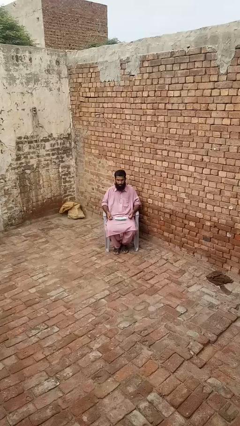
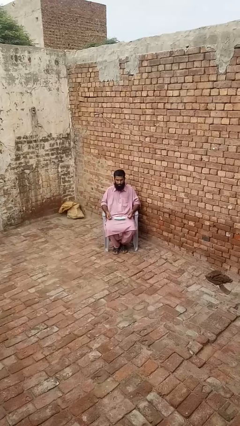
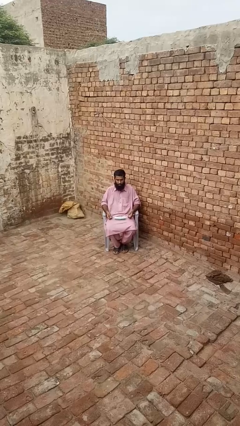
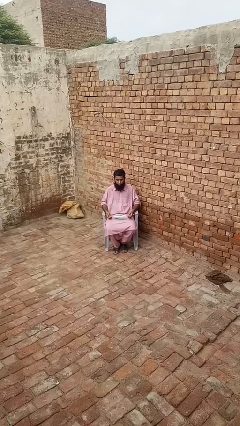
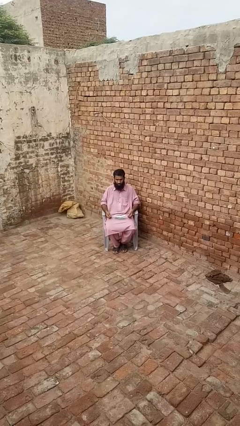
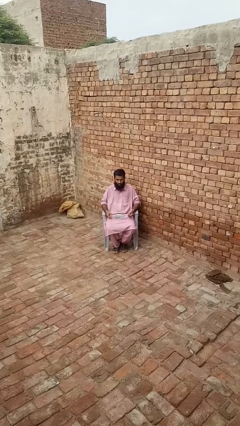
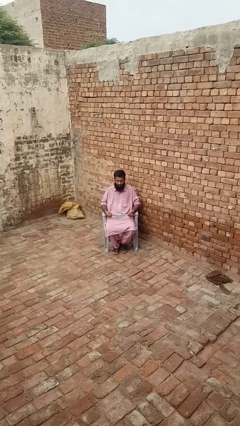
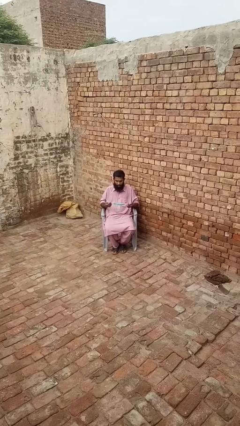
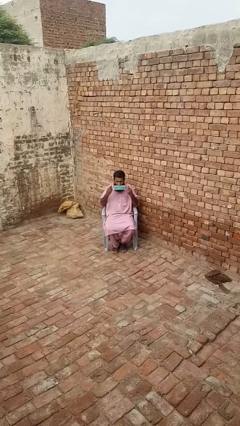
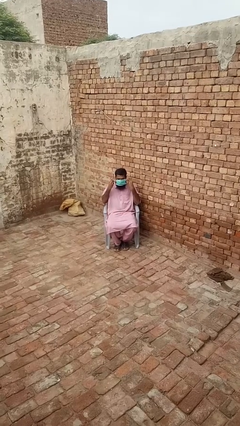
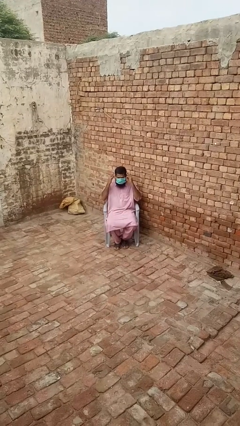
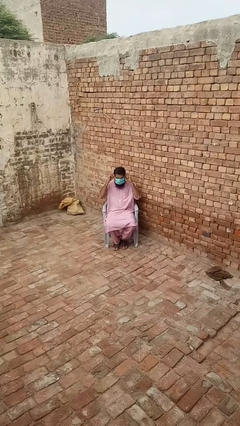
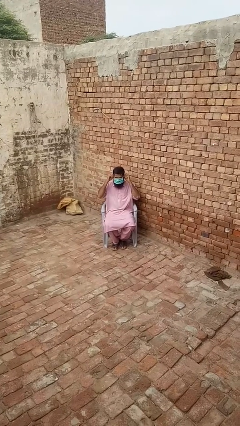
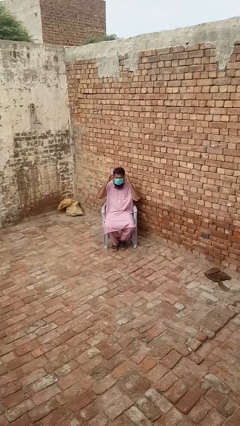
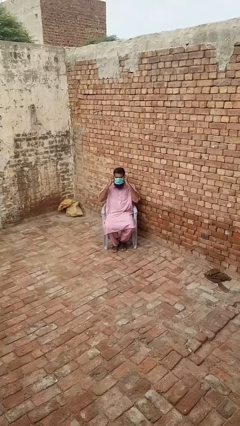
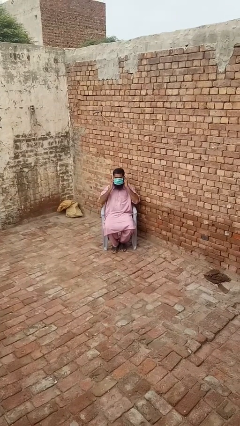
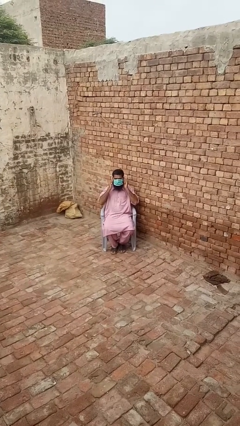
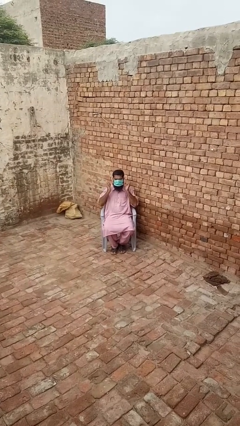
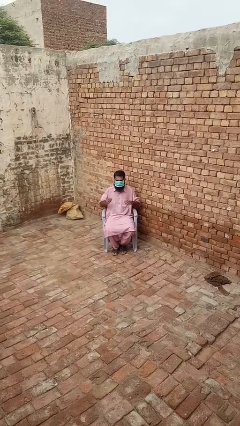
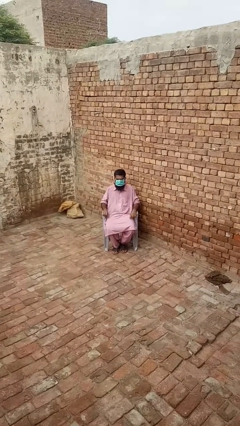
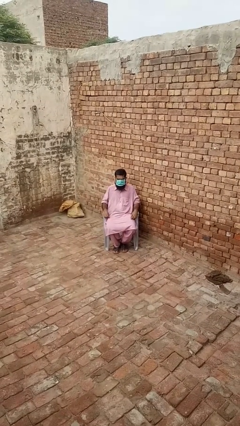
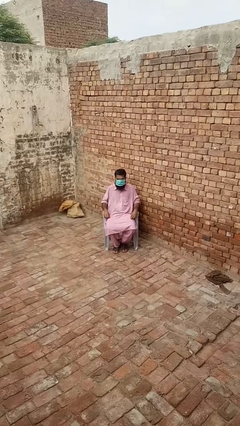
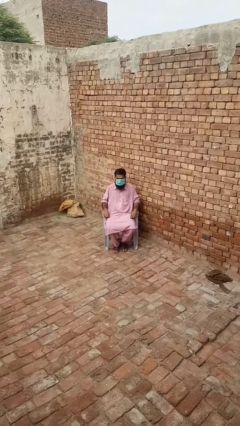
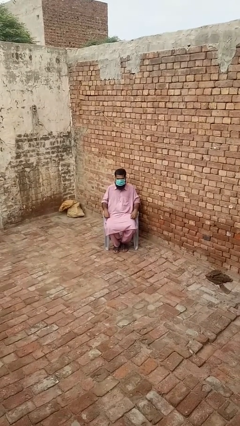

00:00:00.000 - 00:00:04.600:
person puts on facemask

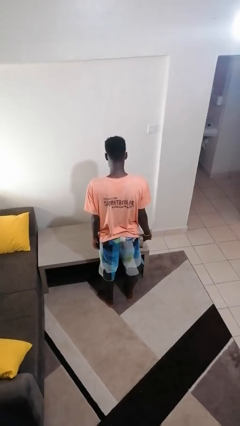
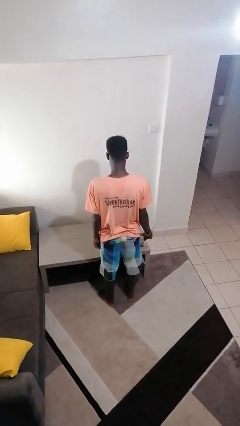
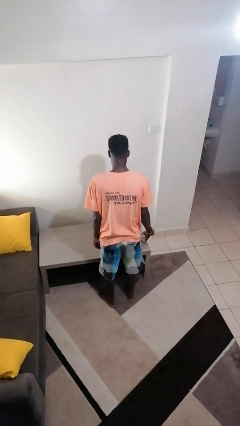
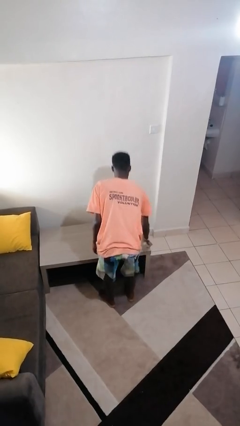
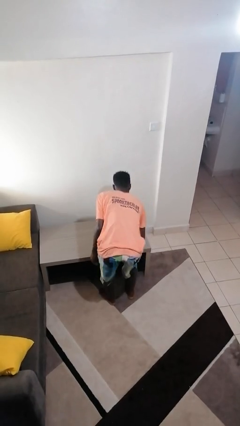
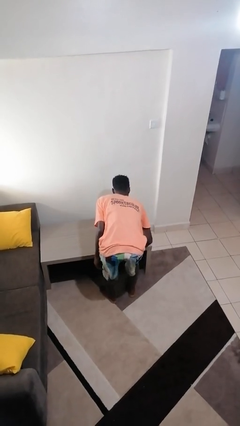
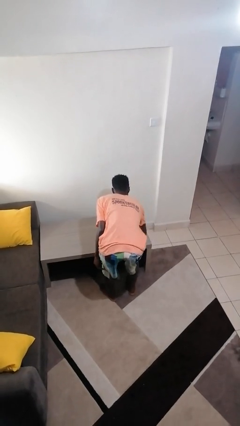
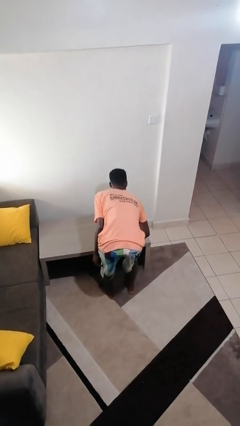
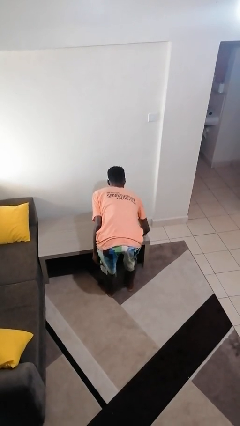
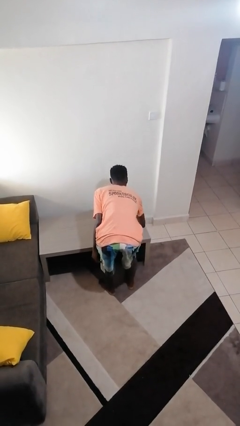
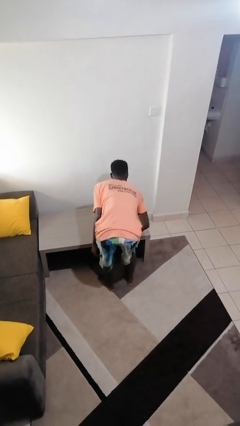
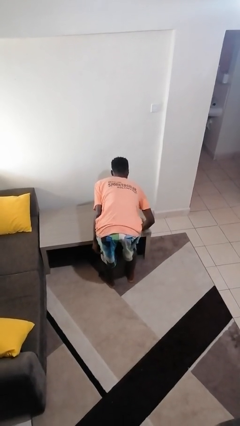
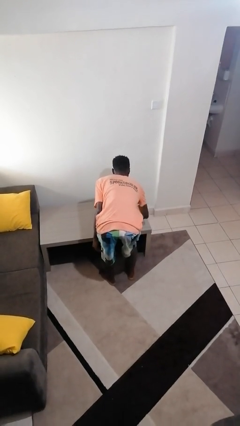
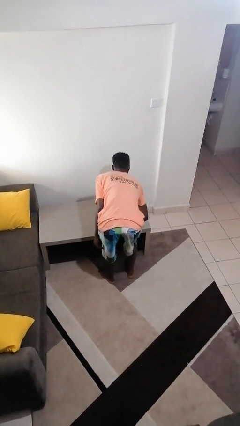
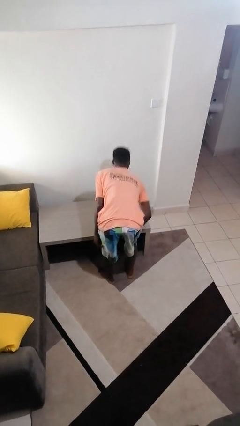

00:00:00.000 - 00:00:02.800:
person cleans table with rag

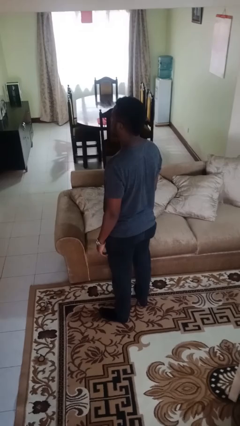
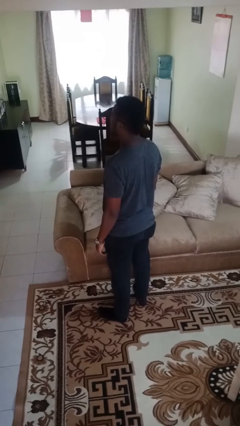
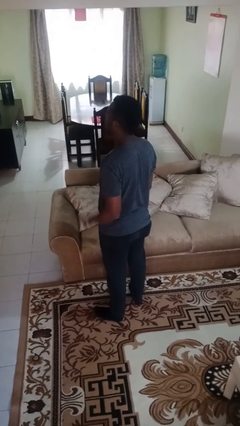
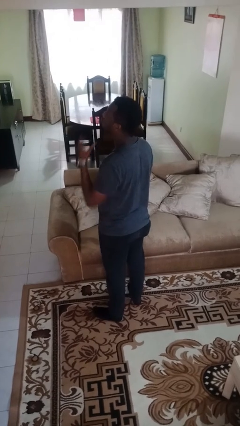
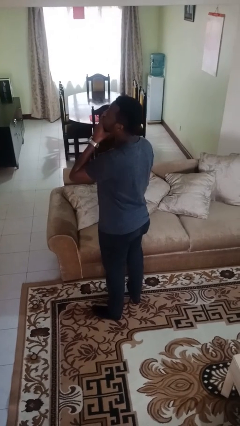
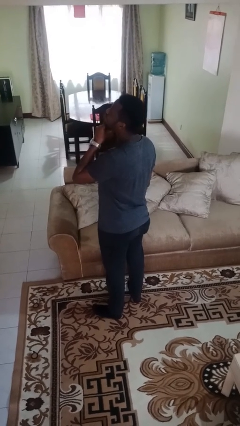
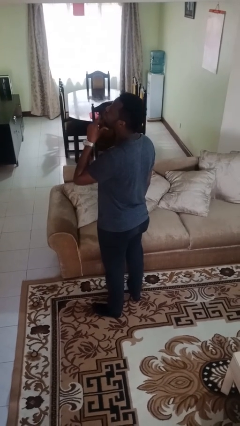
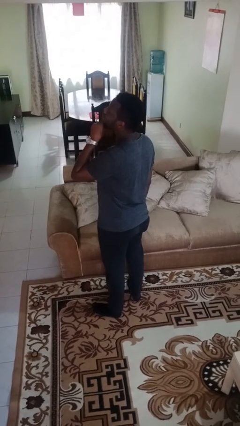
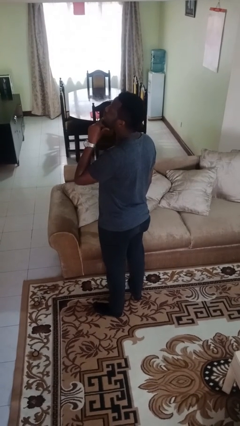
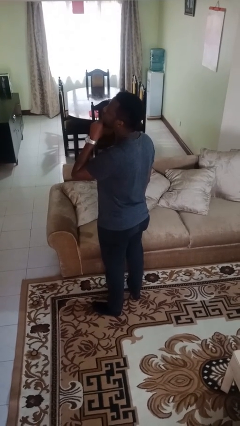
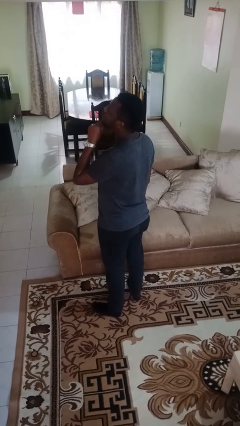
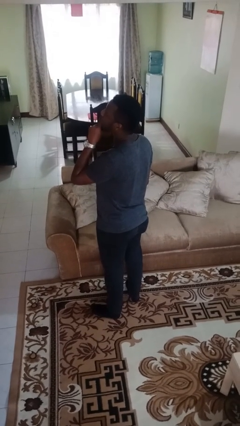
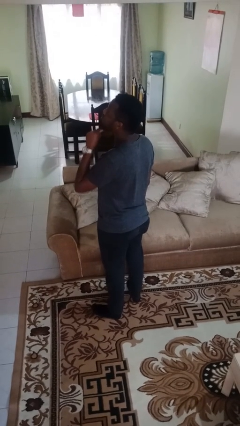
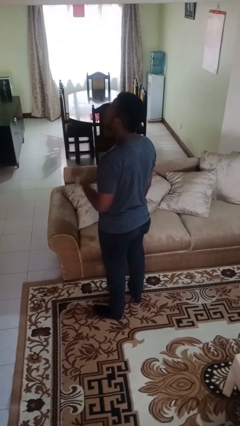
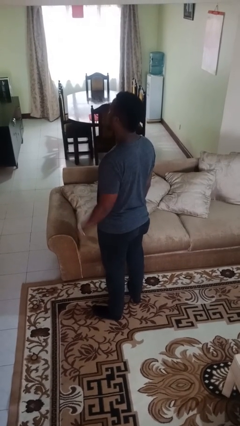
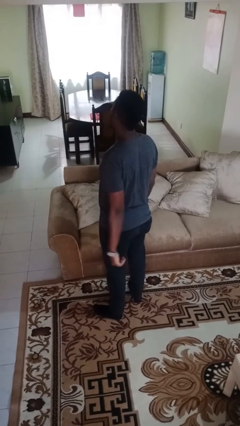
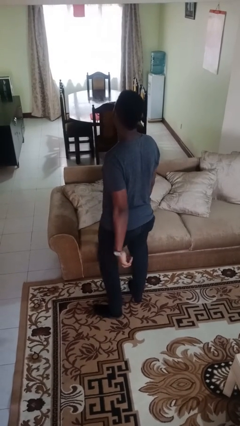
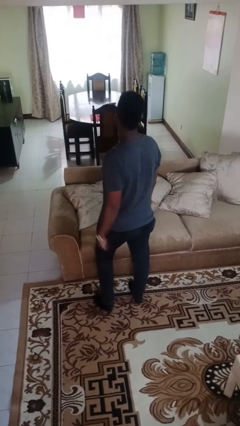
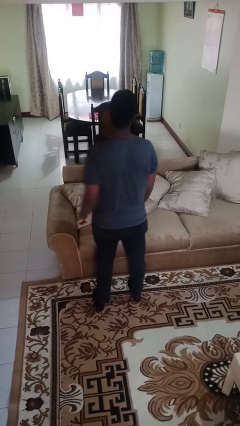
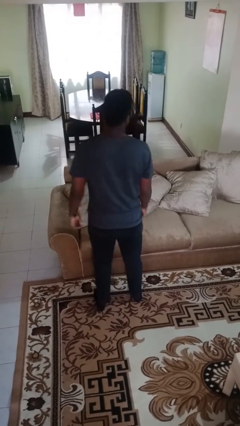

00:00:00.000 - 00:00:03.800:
person strokes chin

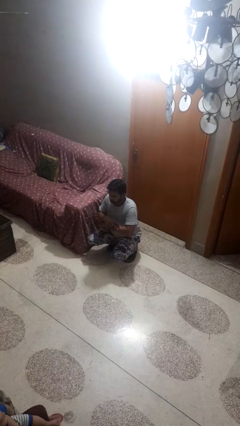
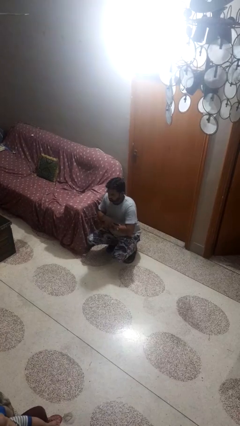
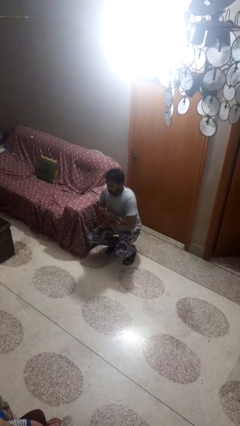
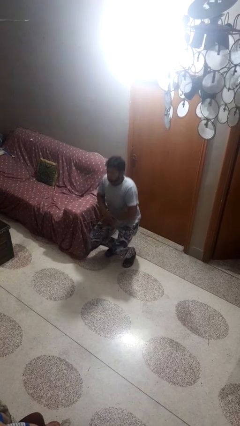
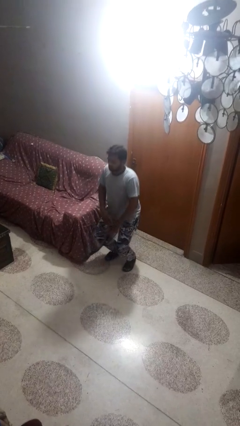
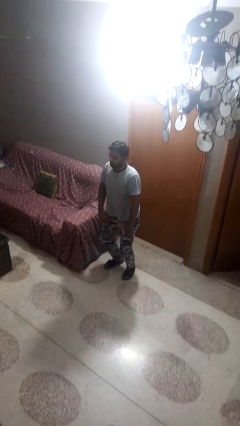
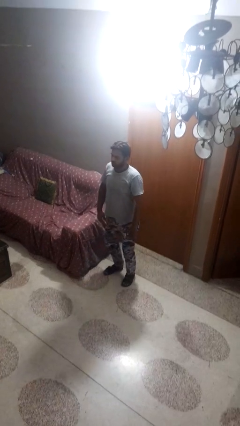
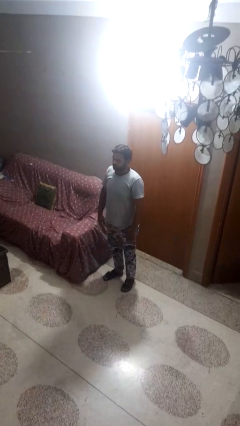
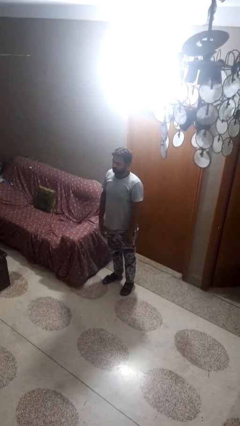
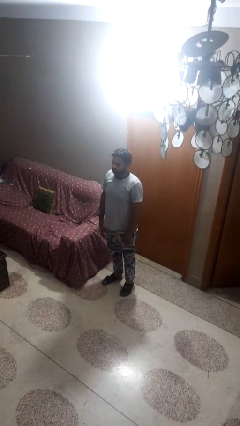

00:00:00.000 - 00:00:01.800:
person stands up

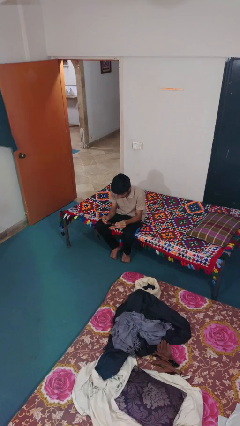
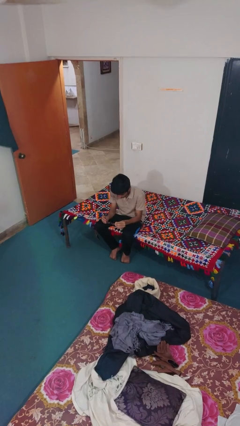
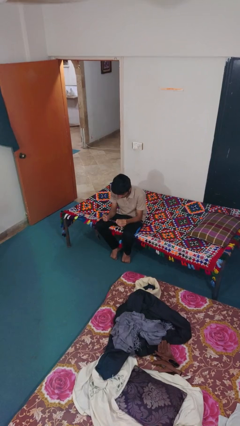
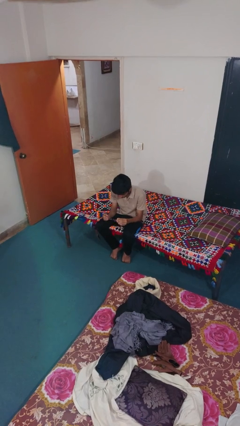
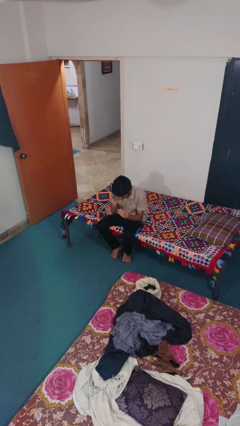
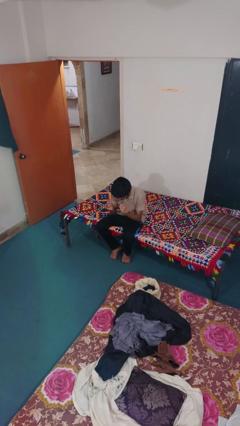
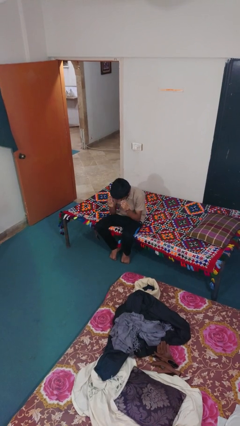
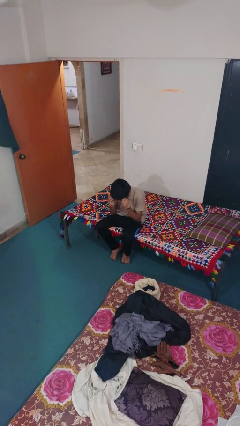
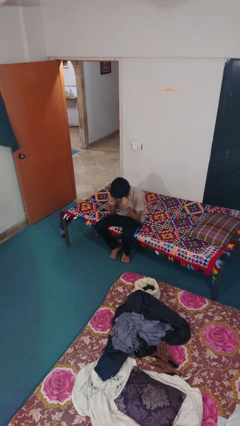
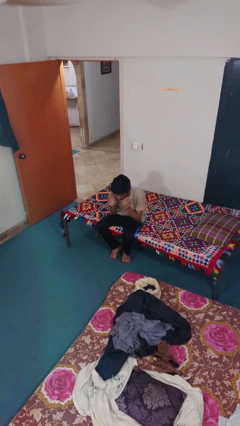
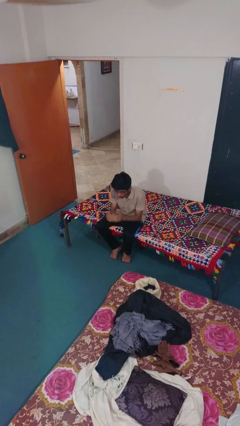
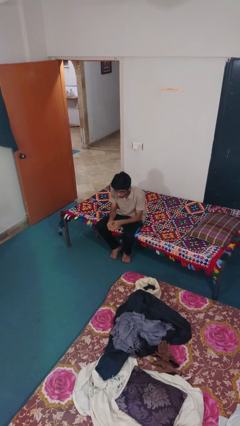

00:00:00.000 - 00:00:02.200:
person puts on glasses

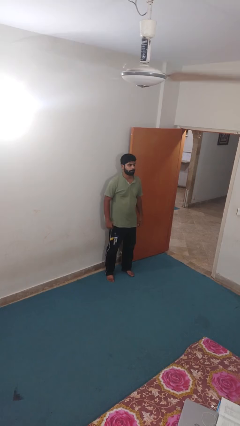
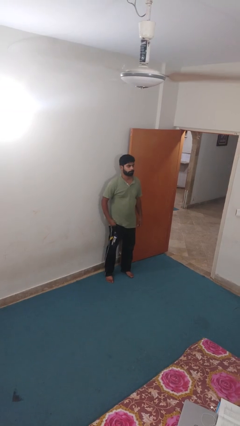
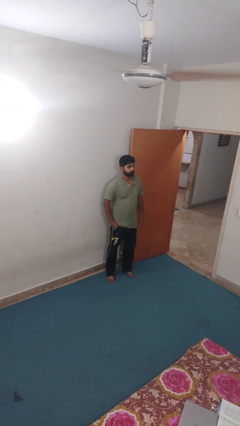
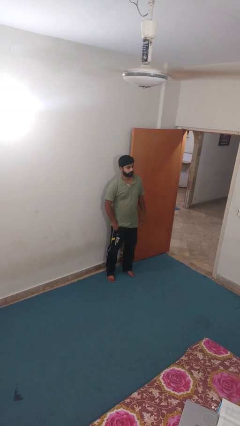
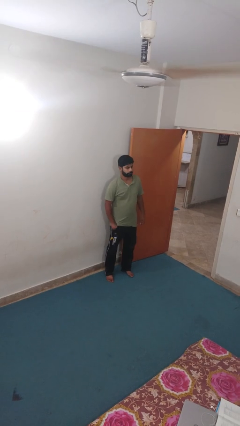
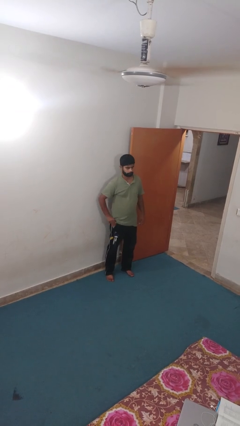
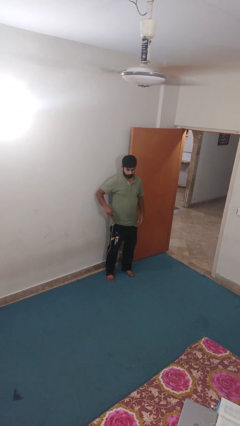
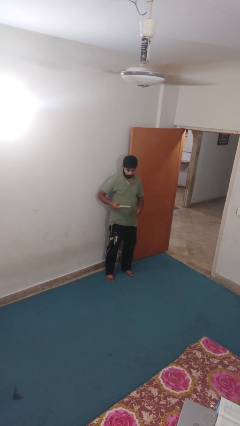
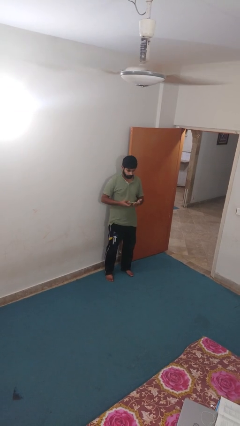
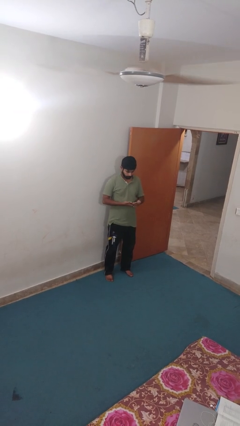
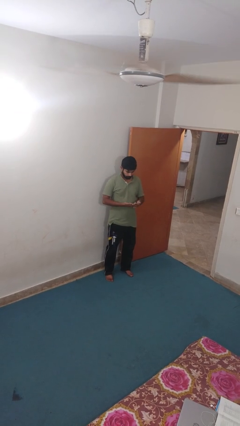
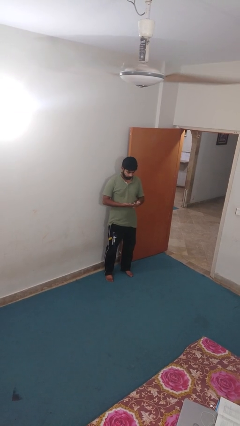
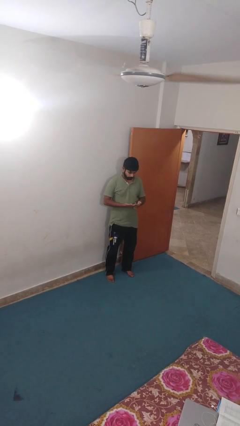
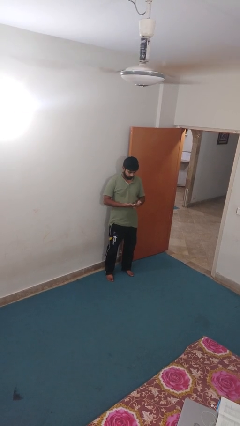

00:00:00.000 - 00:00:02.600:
person takes phone from pocket
